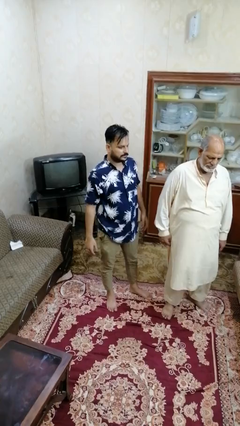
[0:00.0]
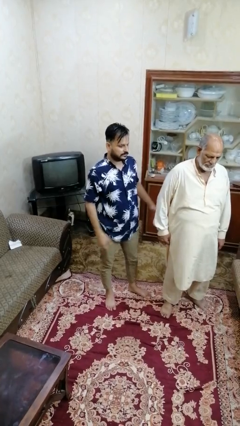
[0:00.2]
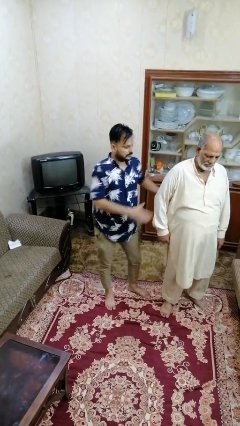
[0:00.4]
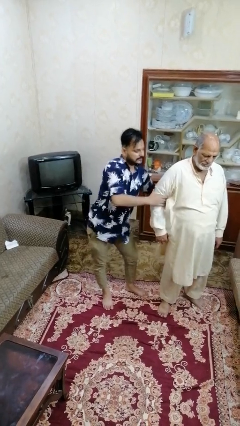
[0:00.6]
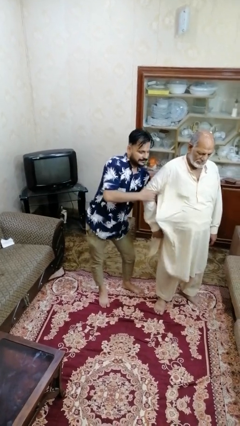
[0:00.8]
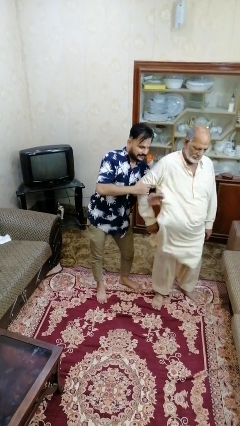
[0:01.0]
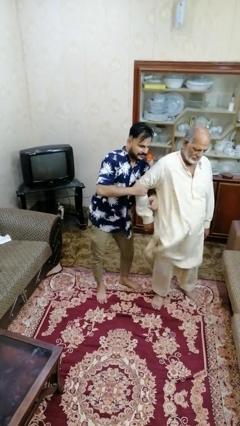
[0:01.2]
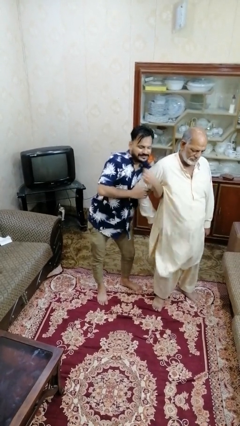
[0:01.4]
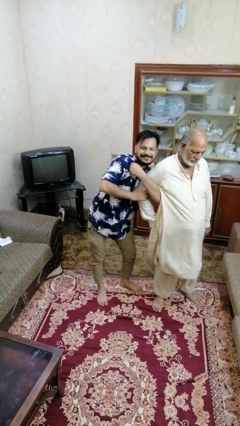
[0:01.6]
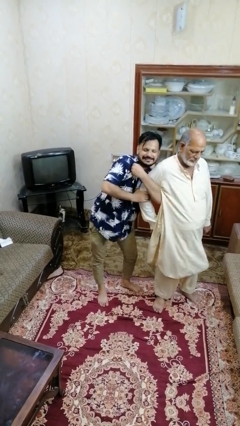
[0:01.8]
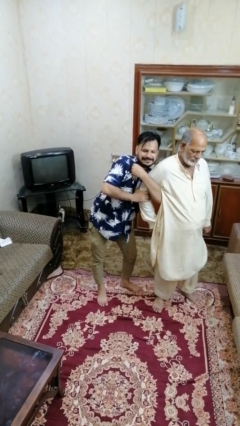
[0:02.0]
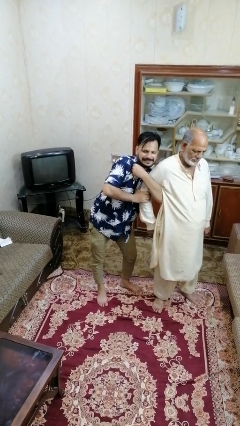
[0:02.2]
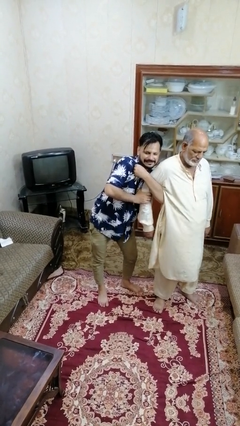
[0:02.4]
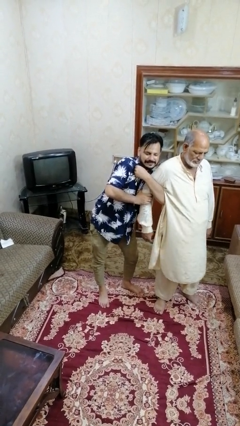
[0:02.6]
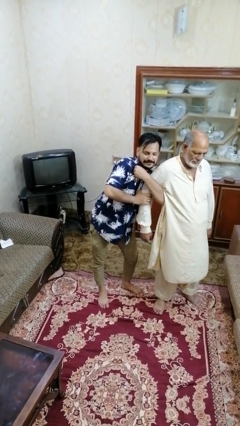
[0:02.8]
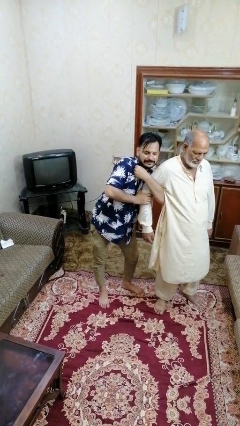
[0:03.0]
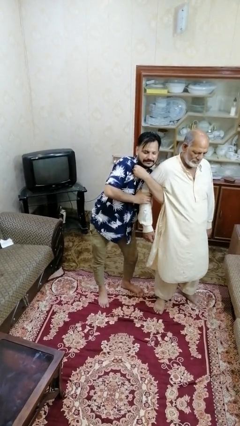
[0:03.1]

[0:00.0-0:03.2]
person grabs person by bicep

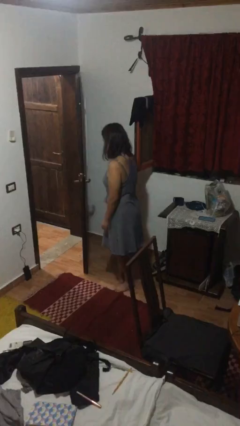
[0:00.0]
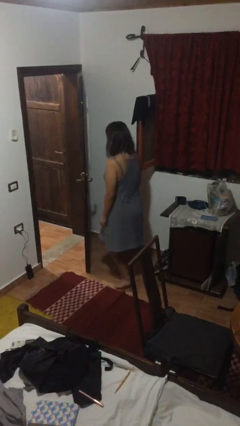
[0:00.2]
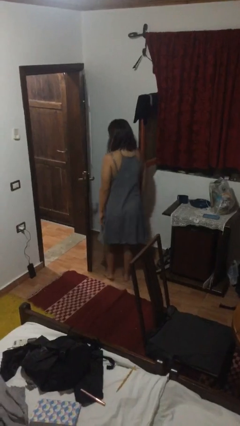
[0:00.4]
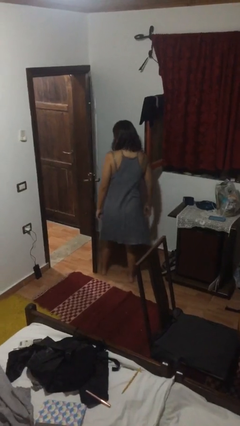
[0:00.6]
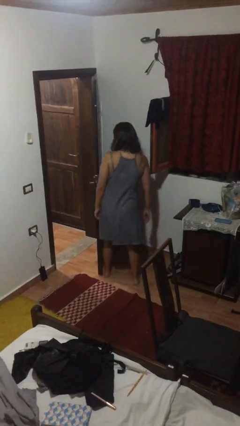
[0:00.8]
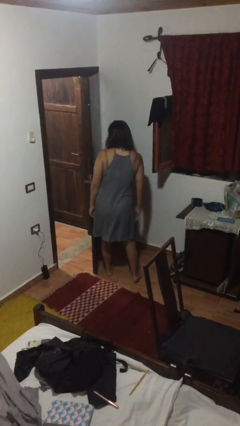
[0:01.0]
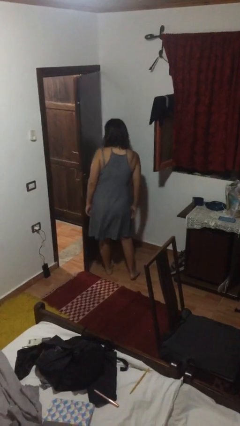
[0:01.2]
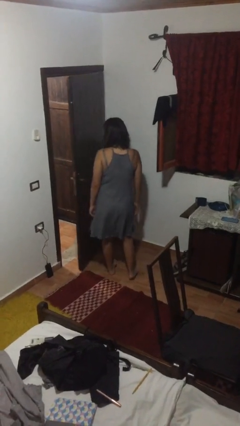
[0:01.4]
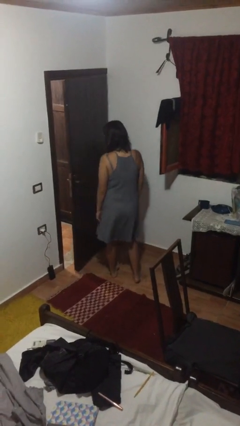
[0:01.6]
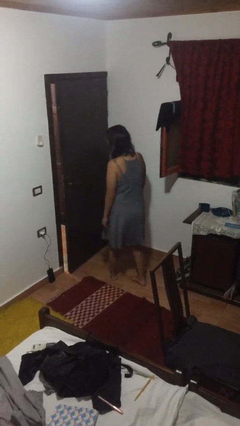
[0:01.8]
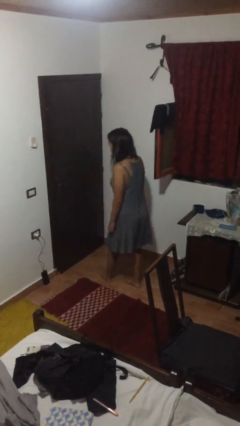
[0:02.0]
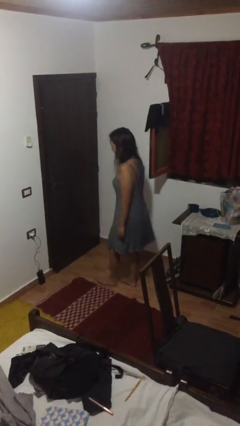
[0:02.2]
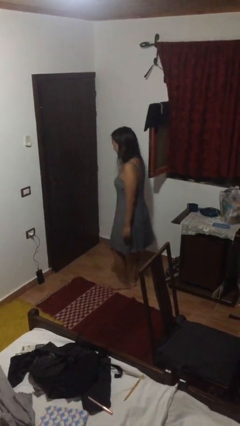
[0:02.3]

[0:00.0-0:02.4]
person closes door with hip

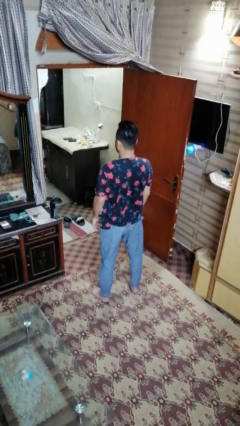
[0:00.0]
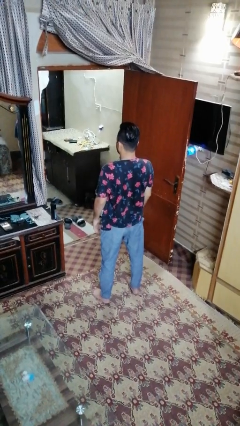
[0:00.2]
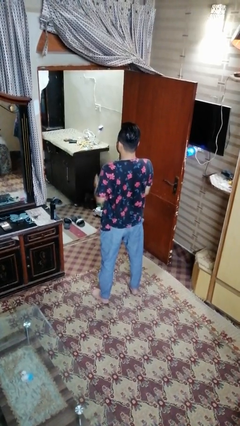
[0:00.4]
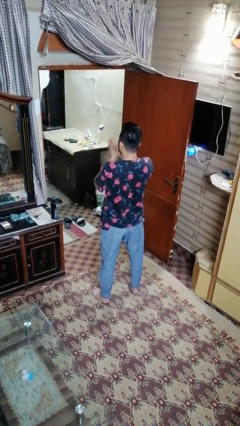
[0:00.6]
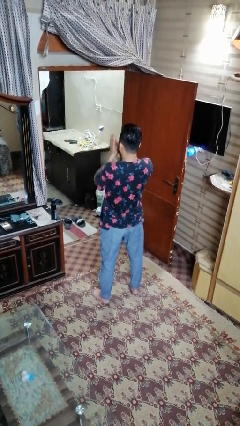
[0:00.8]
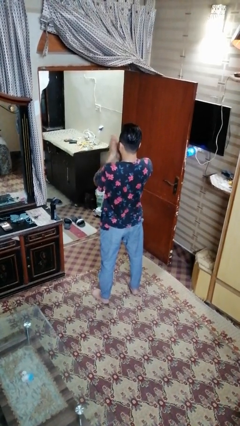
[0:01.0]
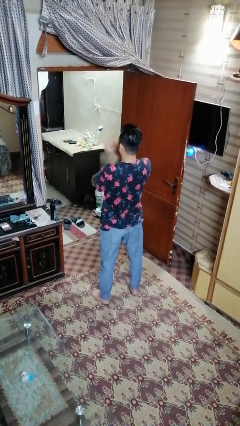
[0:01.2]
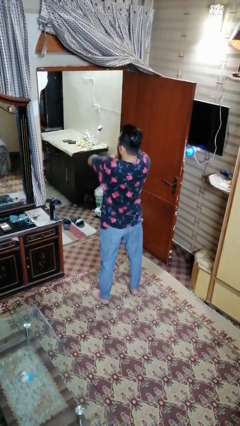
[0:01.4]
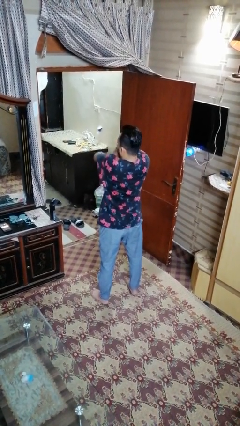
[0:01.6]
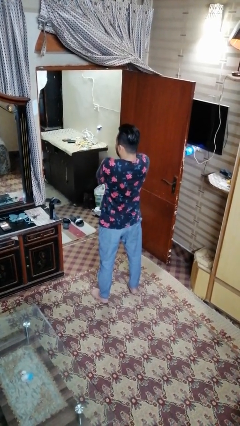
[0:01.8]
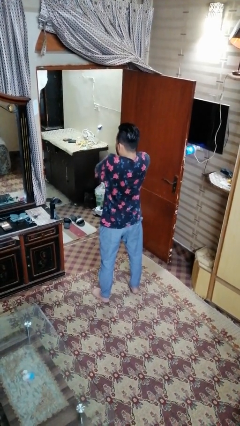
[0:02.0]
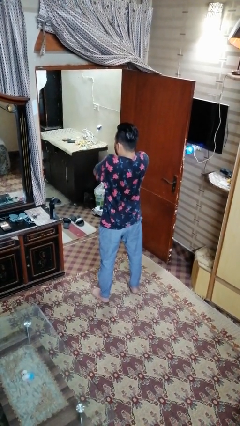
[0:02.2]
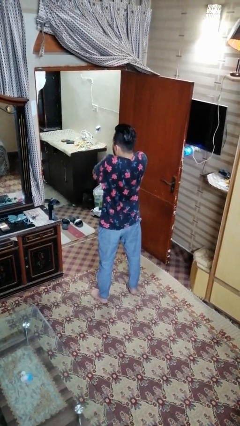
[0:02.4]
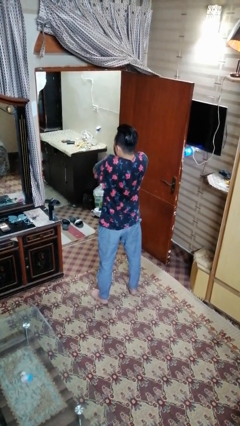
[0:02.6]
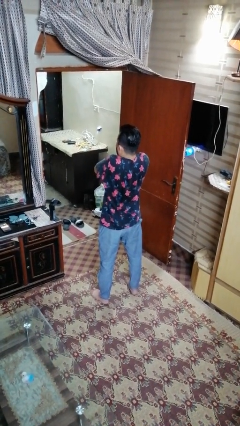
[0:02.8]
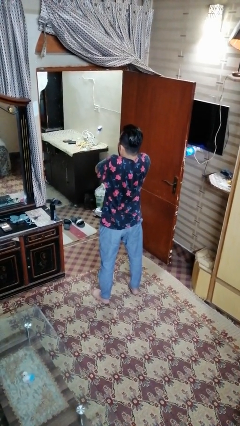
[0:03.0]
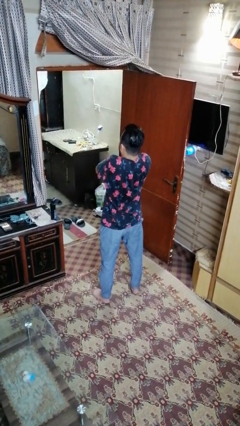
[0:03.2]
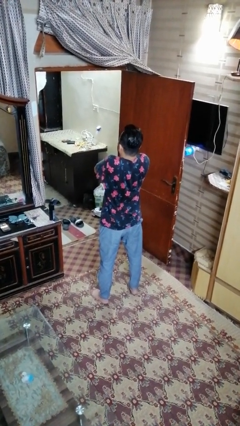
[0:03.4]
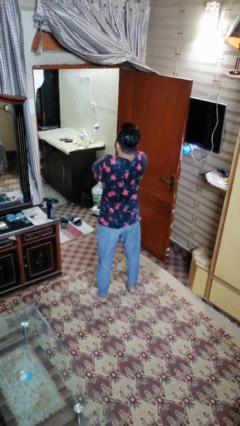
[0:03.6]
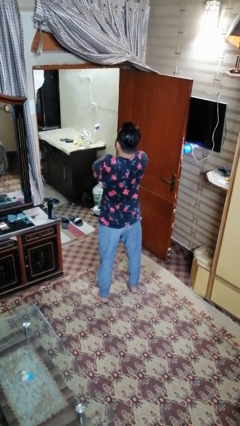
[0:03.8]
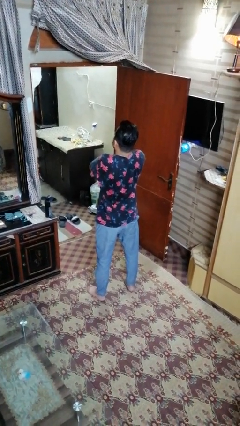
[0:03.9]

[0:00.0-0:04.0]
person blows into hands

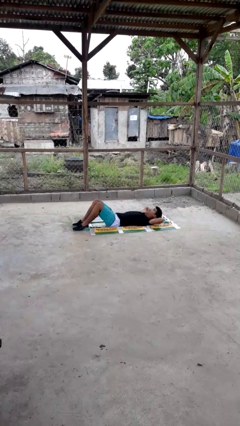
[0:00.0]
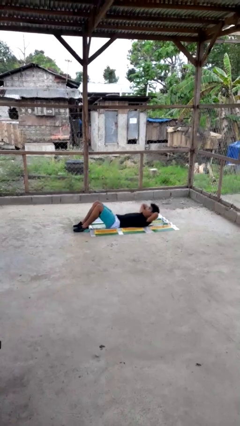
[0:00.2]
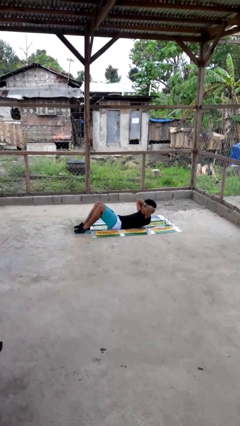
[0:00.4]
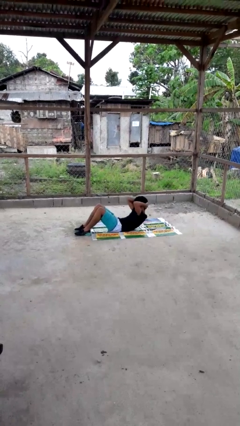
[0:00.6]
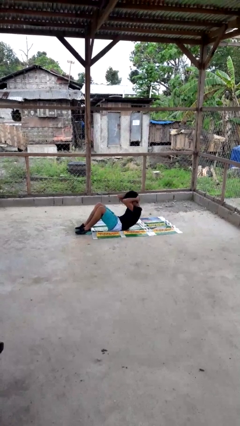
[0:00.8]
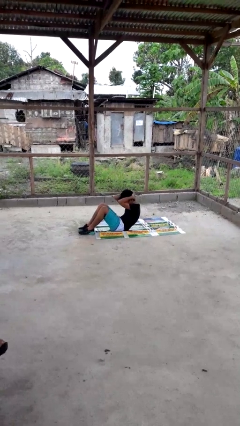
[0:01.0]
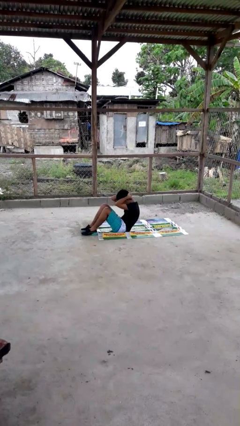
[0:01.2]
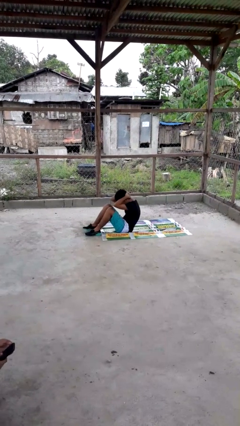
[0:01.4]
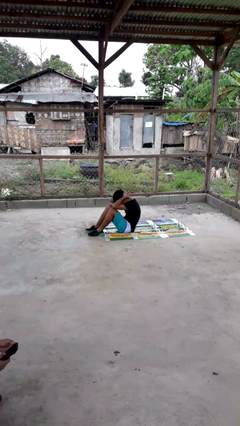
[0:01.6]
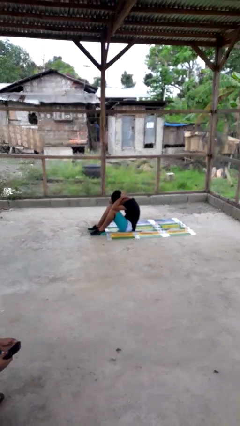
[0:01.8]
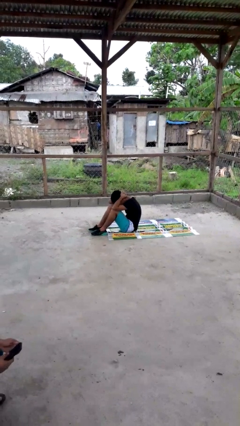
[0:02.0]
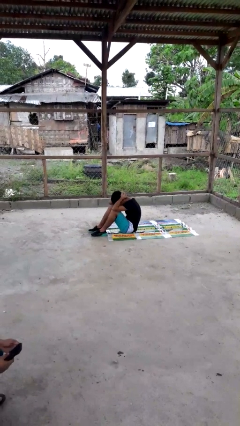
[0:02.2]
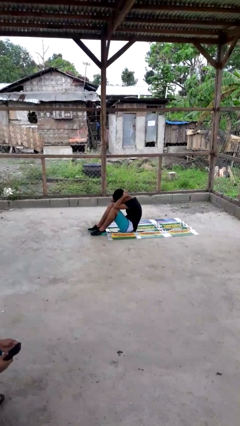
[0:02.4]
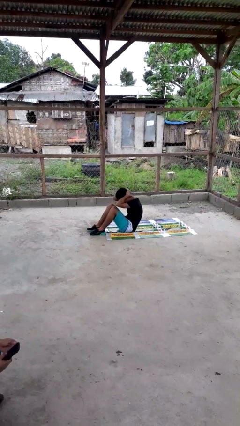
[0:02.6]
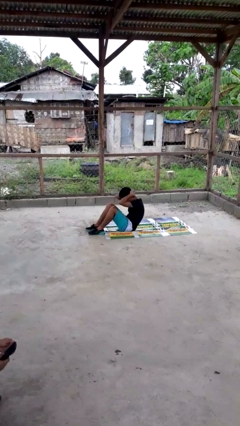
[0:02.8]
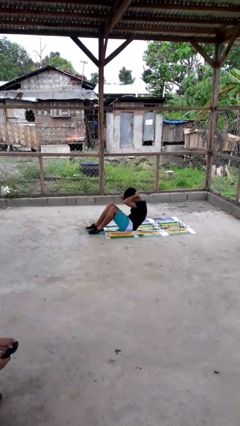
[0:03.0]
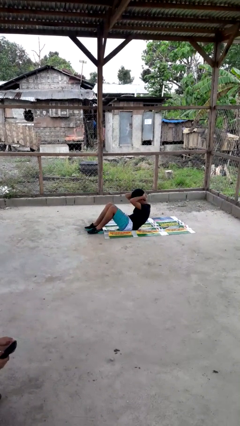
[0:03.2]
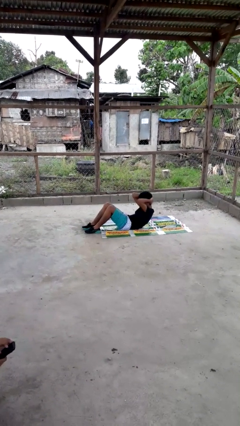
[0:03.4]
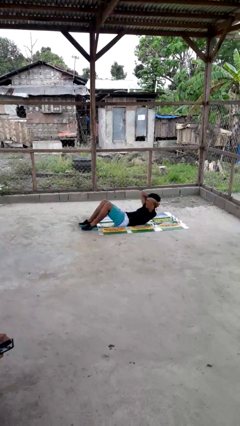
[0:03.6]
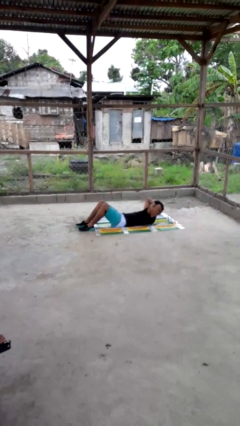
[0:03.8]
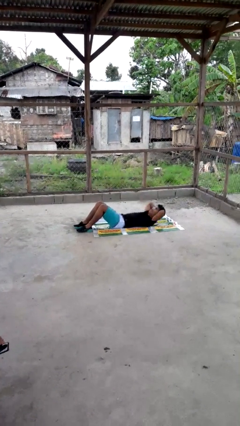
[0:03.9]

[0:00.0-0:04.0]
person exercises with situp

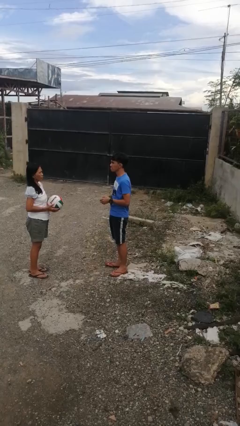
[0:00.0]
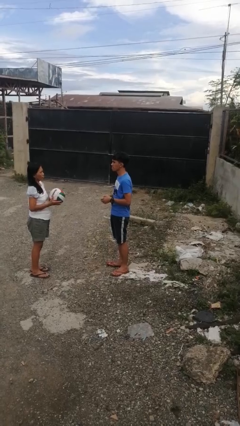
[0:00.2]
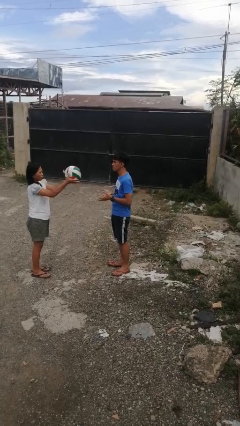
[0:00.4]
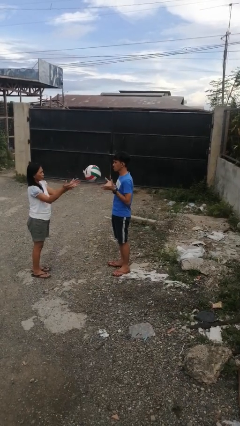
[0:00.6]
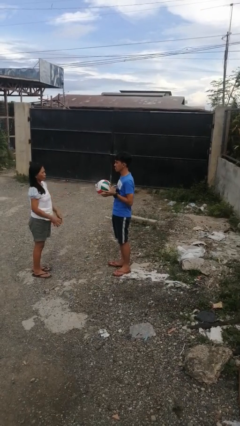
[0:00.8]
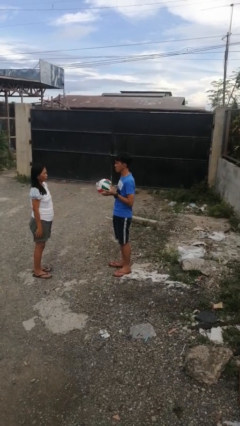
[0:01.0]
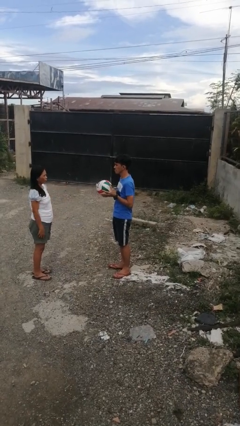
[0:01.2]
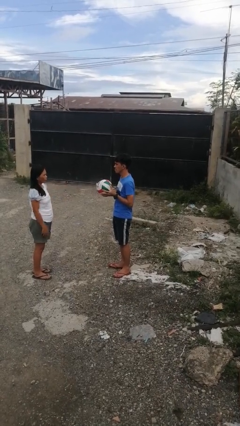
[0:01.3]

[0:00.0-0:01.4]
person catches object from person

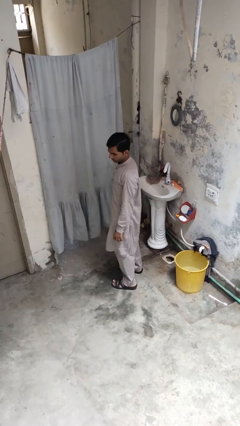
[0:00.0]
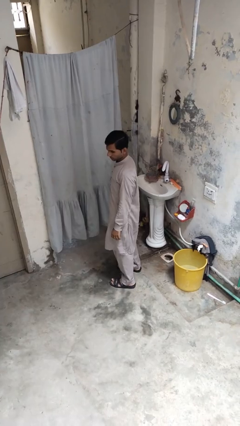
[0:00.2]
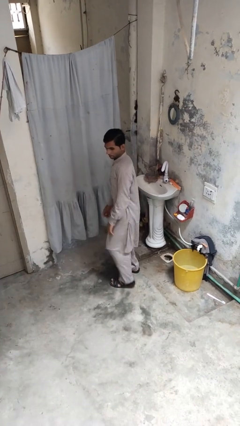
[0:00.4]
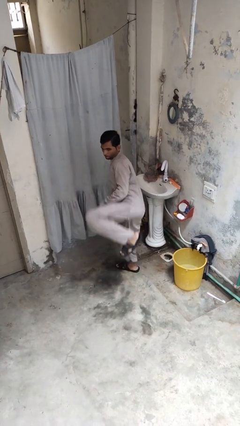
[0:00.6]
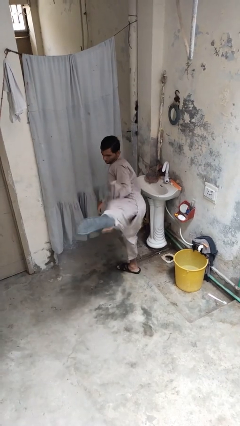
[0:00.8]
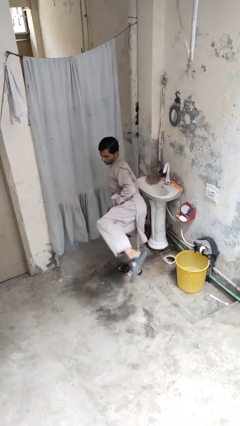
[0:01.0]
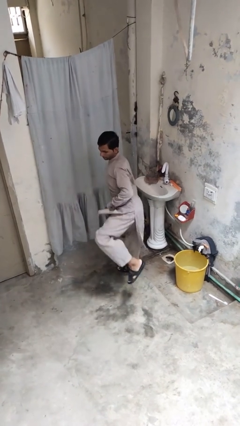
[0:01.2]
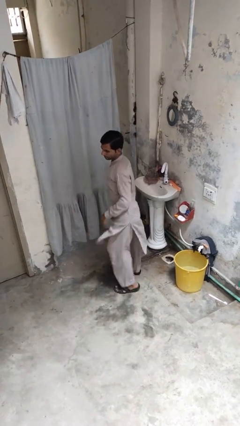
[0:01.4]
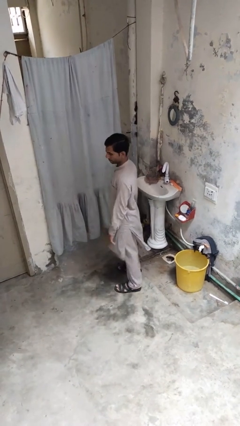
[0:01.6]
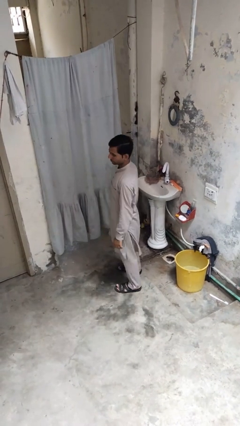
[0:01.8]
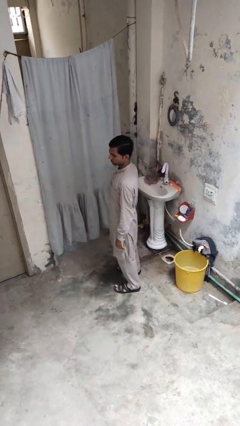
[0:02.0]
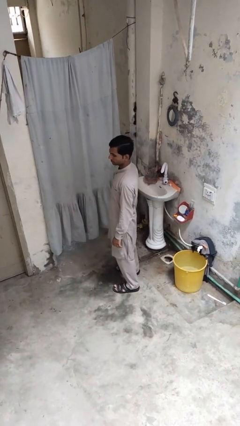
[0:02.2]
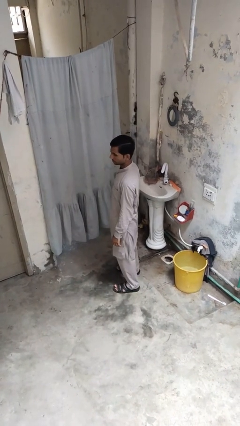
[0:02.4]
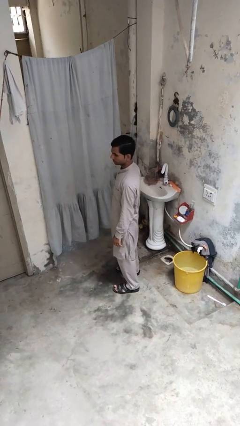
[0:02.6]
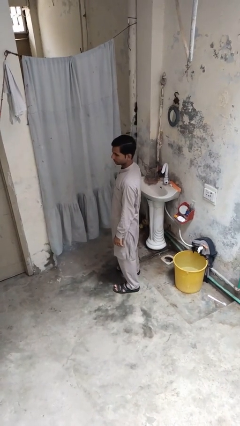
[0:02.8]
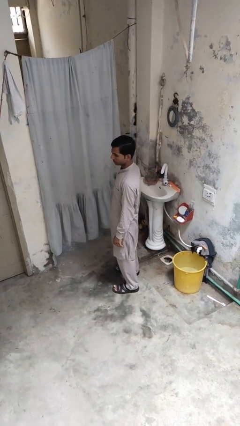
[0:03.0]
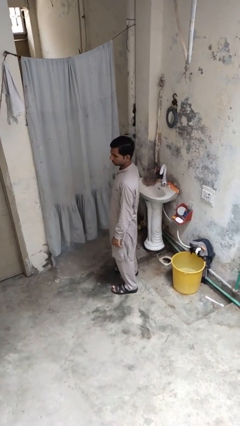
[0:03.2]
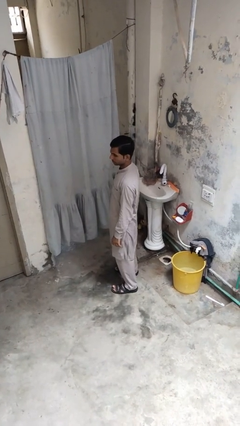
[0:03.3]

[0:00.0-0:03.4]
person karate kicks
